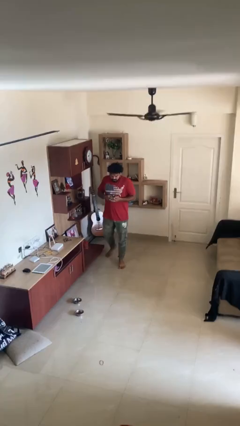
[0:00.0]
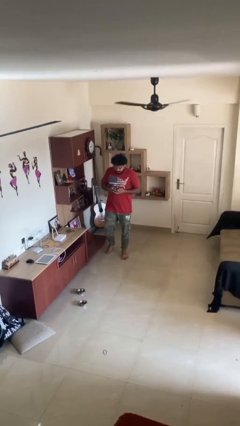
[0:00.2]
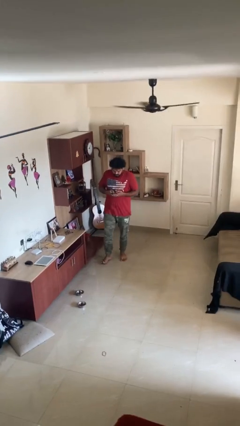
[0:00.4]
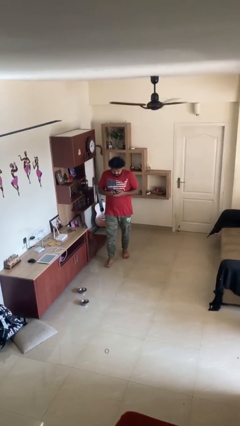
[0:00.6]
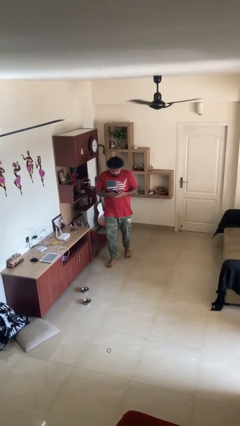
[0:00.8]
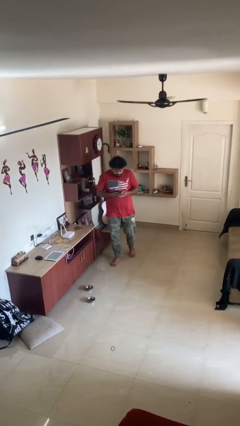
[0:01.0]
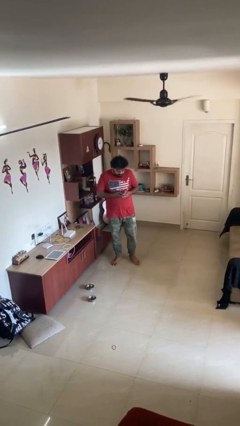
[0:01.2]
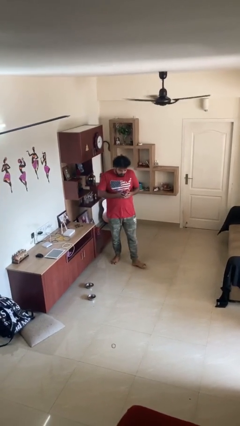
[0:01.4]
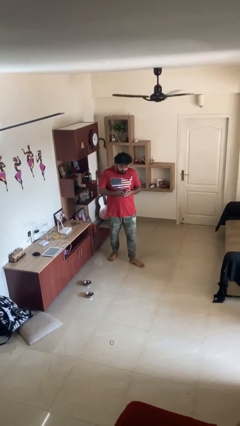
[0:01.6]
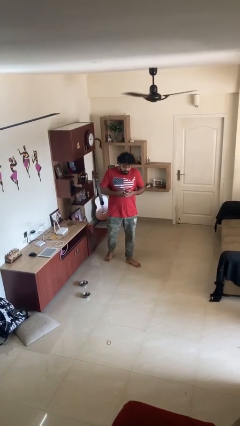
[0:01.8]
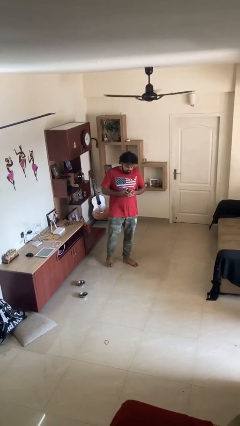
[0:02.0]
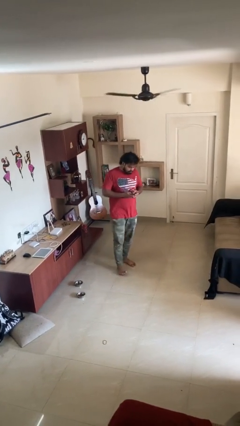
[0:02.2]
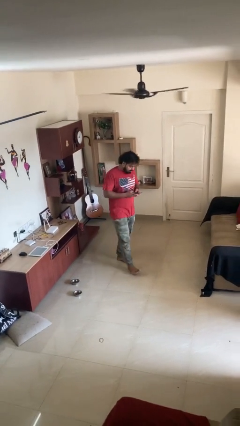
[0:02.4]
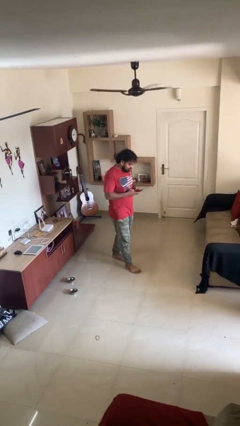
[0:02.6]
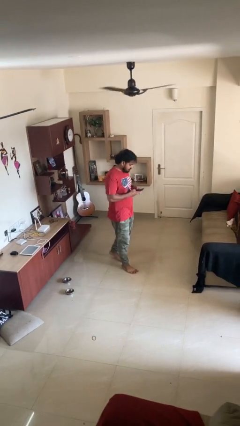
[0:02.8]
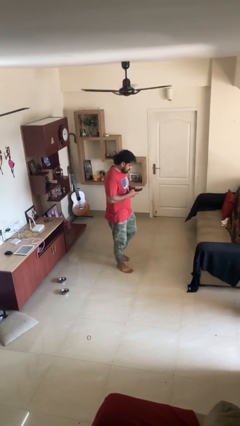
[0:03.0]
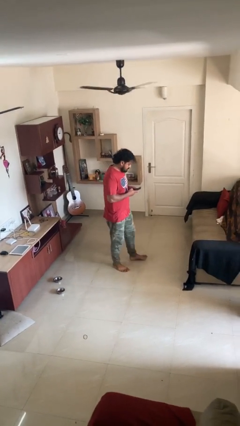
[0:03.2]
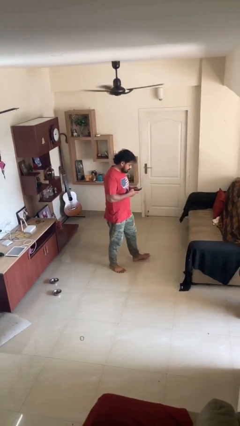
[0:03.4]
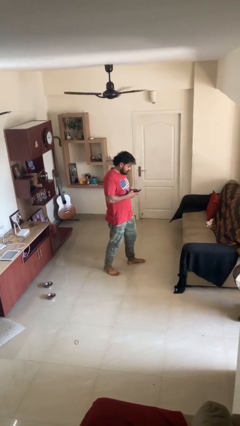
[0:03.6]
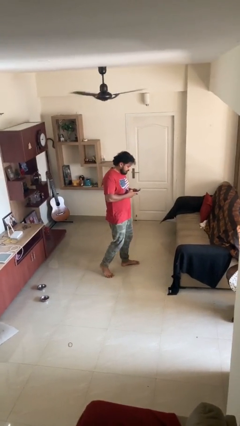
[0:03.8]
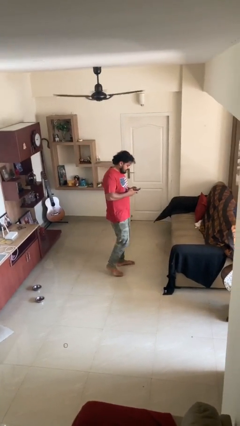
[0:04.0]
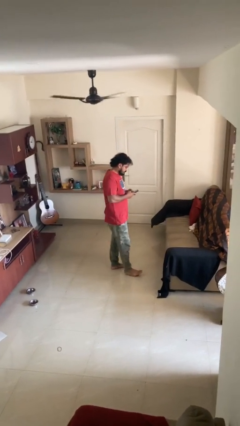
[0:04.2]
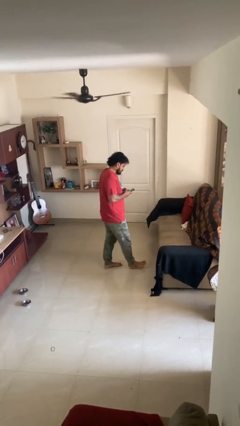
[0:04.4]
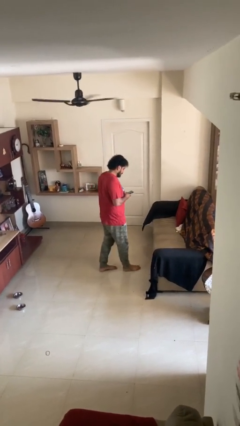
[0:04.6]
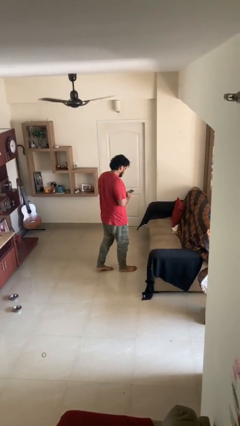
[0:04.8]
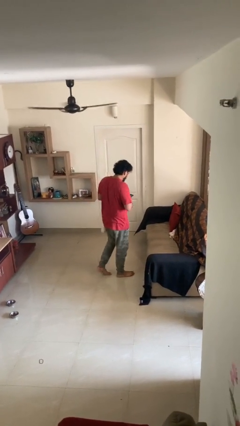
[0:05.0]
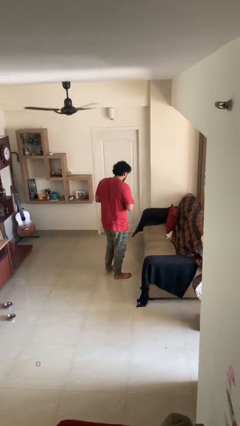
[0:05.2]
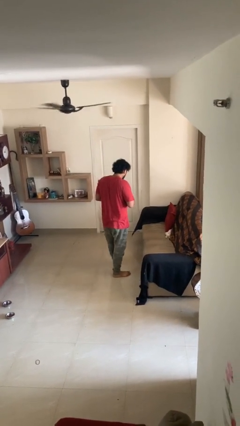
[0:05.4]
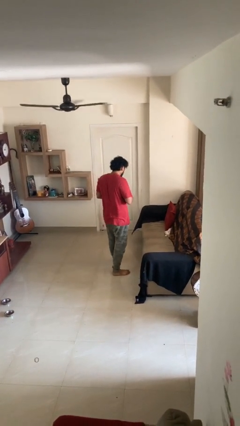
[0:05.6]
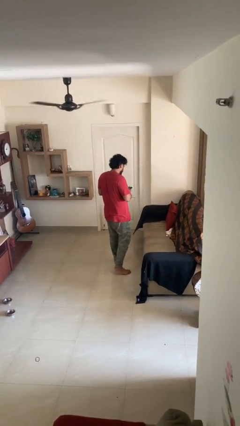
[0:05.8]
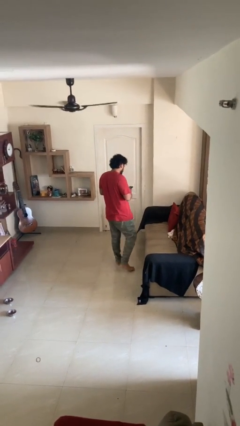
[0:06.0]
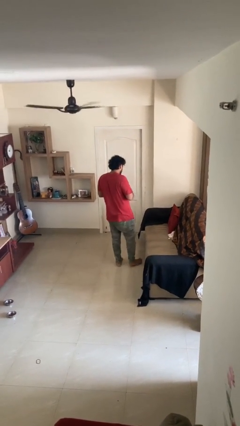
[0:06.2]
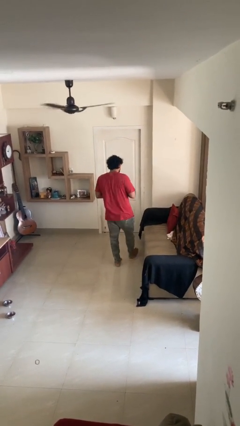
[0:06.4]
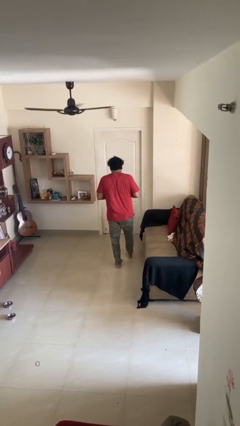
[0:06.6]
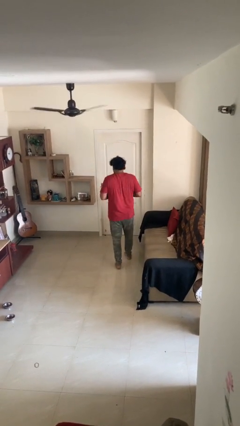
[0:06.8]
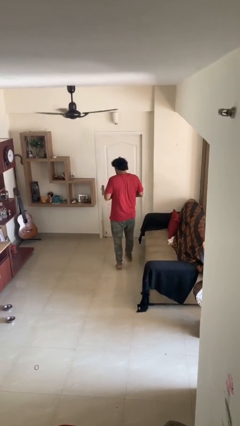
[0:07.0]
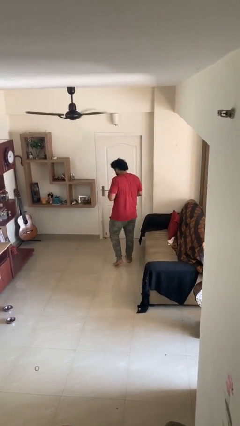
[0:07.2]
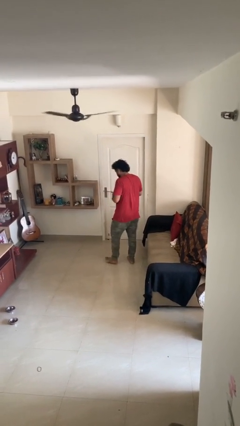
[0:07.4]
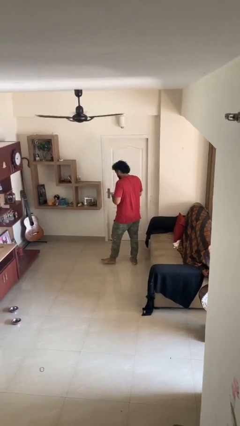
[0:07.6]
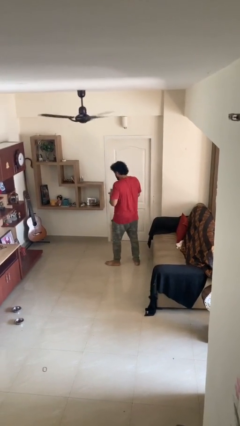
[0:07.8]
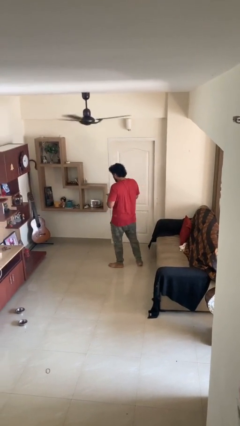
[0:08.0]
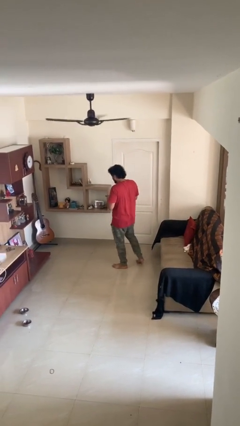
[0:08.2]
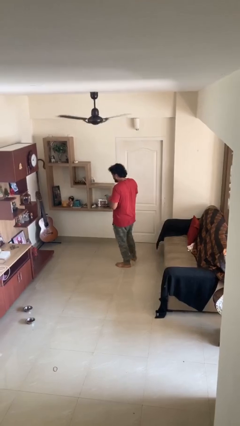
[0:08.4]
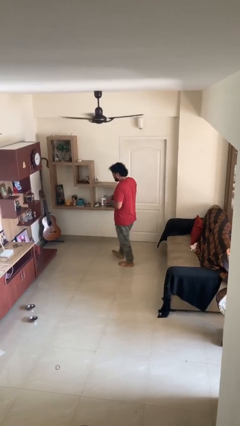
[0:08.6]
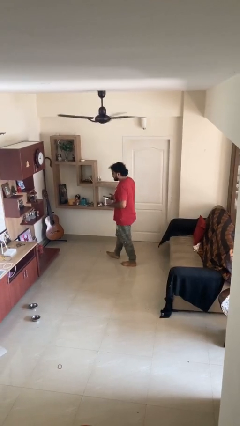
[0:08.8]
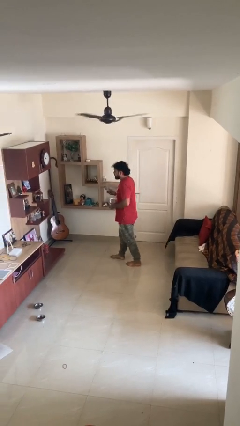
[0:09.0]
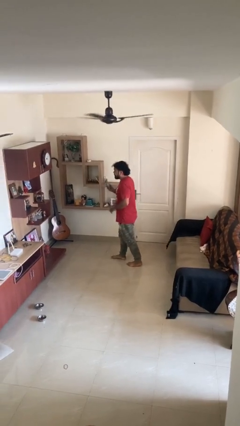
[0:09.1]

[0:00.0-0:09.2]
person texts on phone

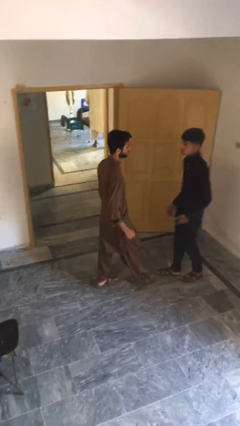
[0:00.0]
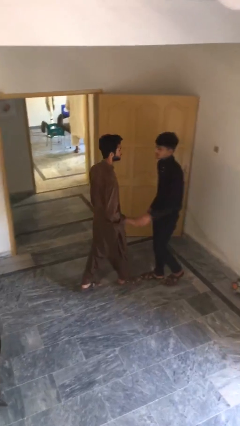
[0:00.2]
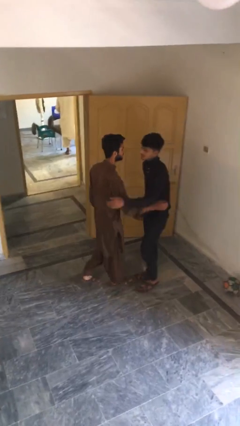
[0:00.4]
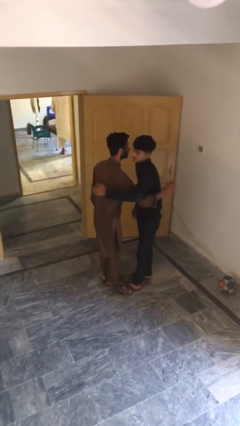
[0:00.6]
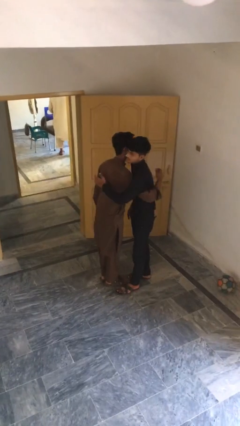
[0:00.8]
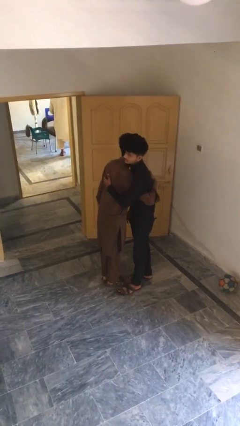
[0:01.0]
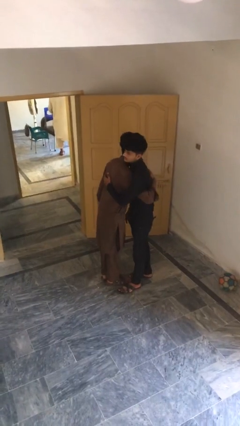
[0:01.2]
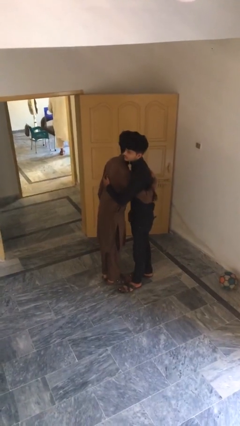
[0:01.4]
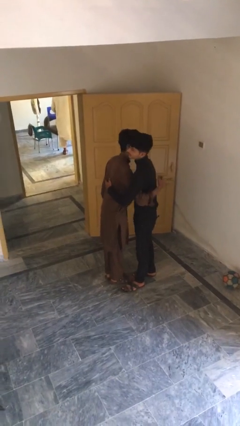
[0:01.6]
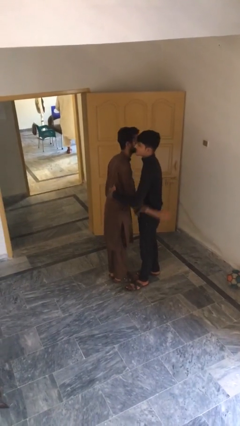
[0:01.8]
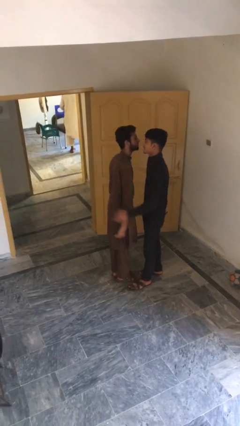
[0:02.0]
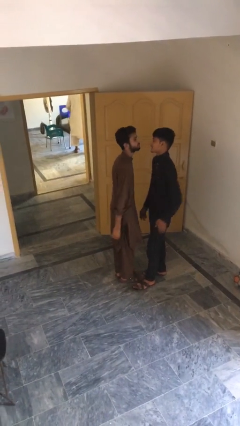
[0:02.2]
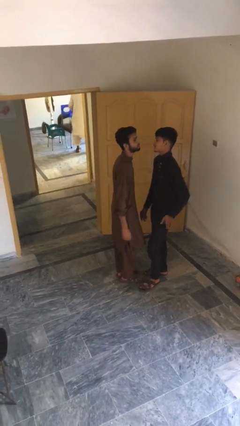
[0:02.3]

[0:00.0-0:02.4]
person embraces person

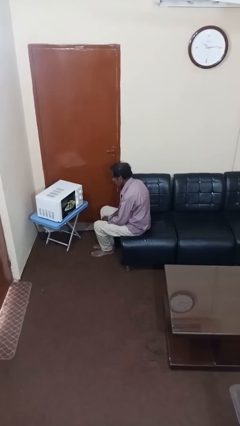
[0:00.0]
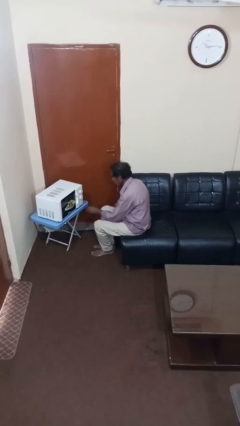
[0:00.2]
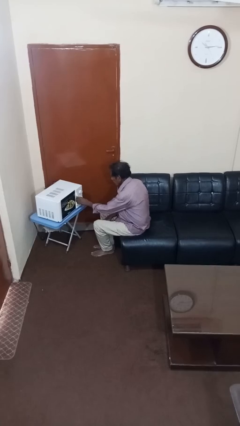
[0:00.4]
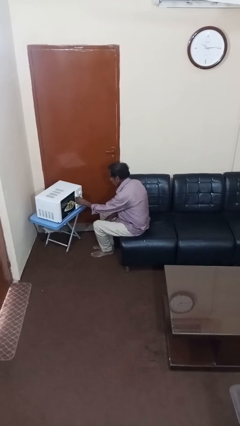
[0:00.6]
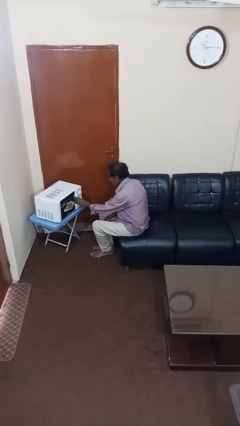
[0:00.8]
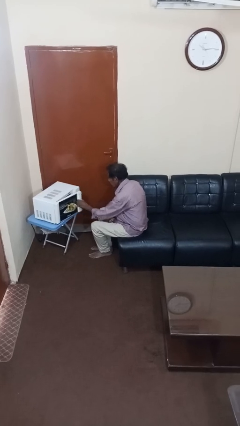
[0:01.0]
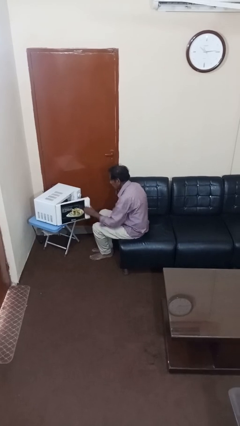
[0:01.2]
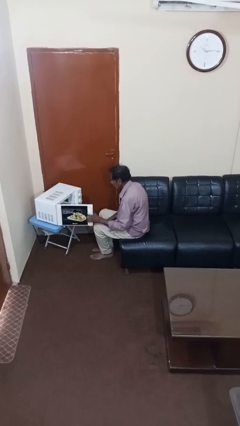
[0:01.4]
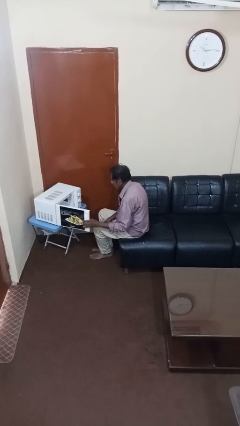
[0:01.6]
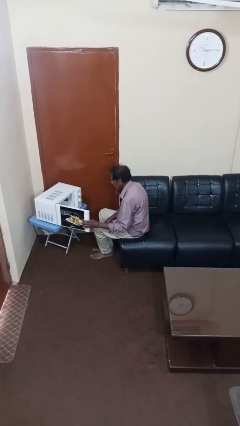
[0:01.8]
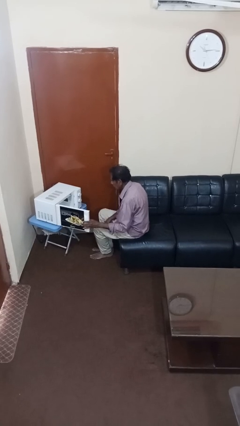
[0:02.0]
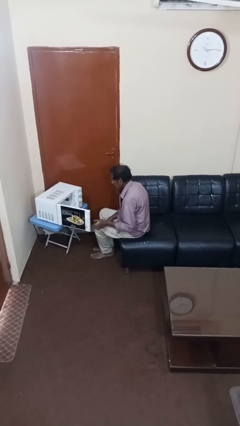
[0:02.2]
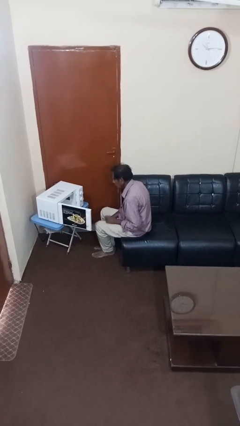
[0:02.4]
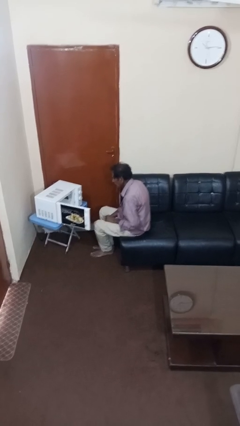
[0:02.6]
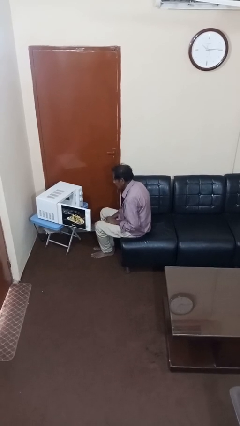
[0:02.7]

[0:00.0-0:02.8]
person opens microwave

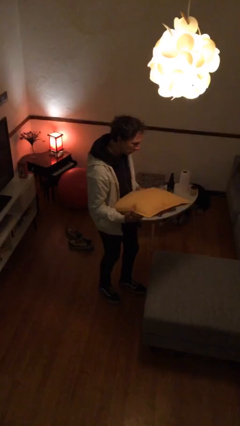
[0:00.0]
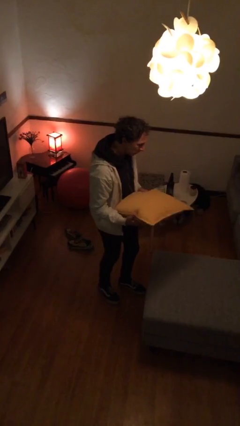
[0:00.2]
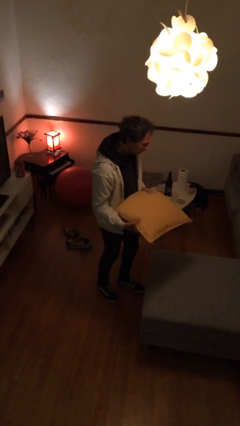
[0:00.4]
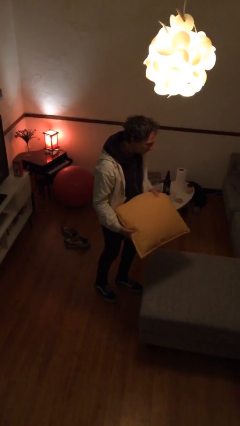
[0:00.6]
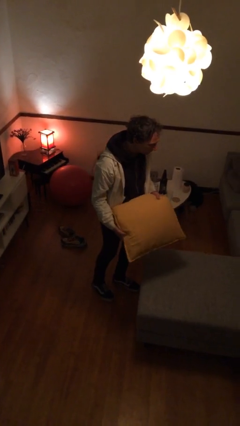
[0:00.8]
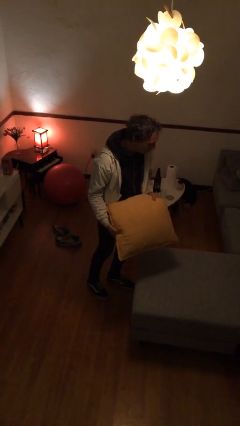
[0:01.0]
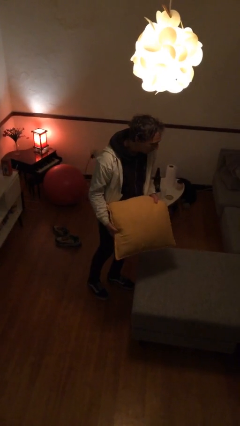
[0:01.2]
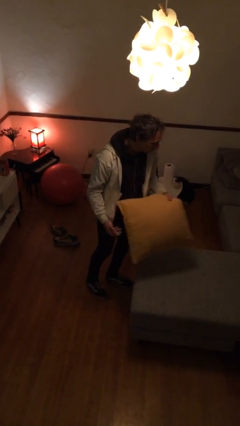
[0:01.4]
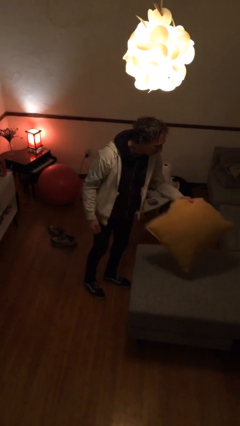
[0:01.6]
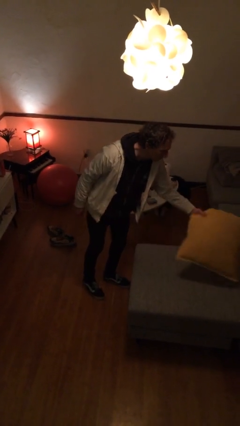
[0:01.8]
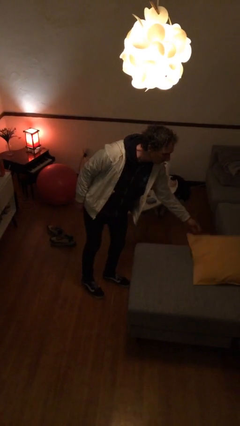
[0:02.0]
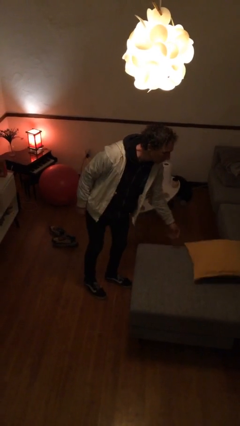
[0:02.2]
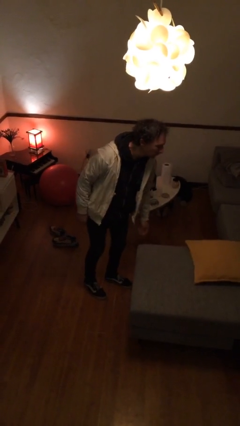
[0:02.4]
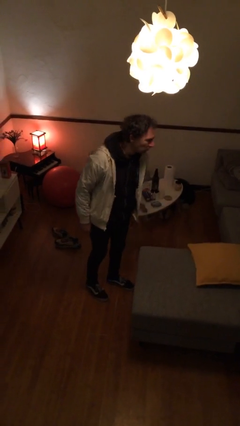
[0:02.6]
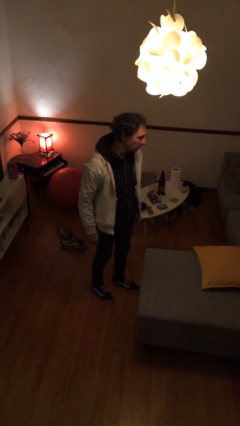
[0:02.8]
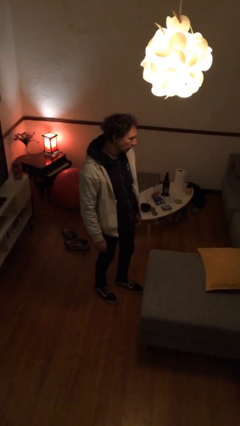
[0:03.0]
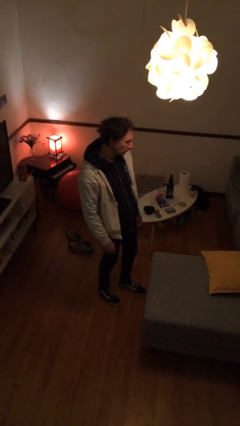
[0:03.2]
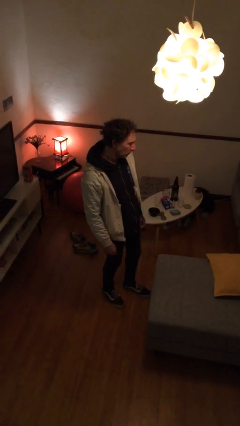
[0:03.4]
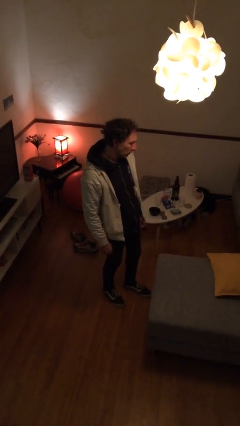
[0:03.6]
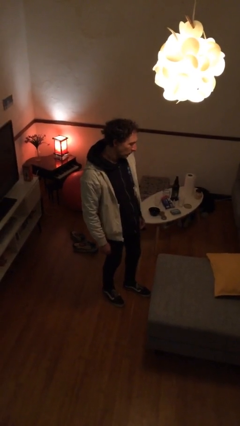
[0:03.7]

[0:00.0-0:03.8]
person puts down object on couch
